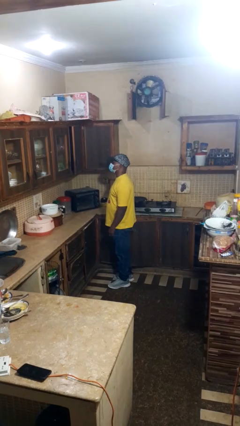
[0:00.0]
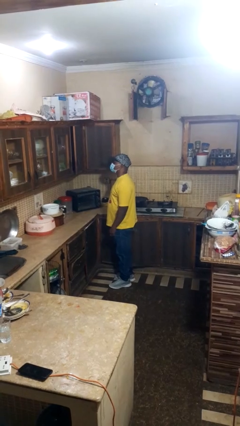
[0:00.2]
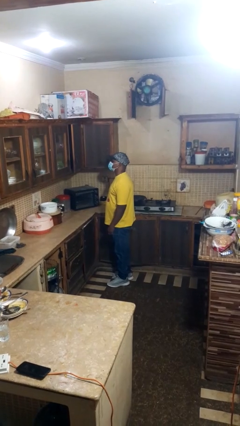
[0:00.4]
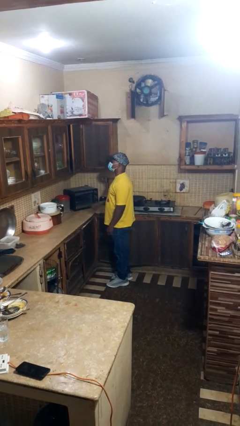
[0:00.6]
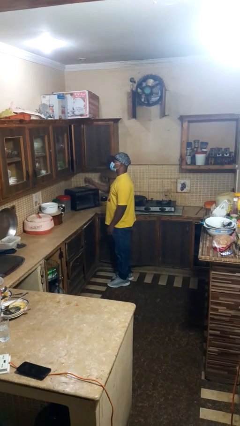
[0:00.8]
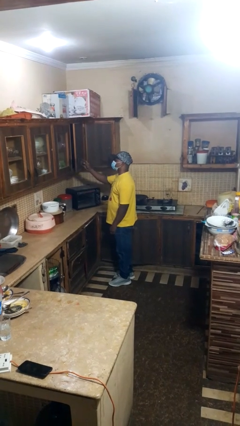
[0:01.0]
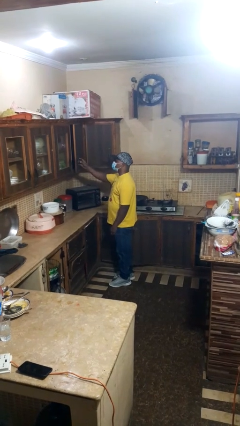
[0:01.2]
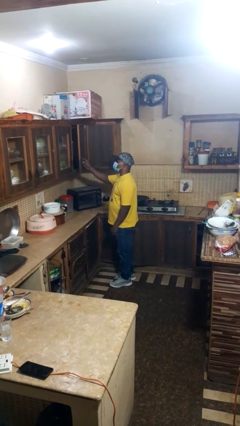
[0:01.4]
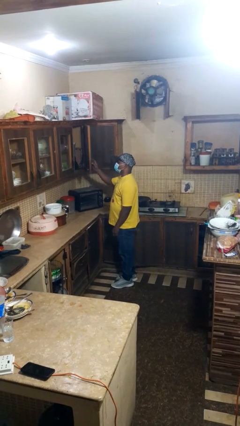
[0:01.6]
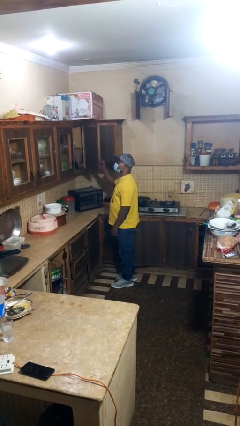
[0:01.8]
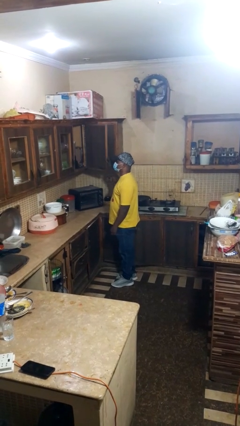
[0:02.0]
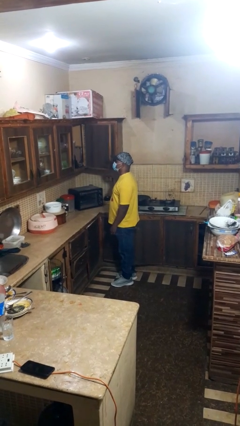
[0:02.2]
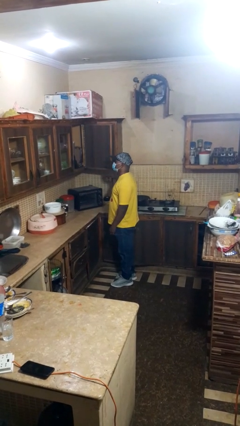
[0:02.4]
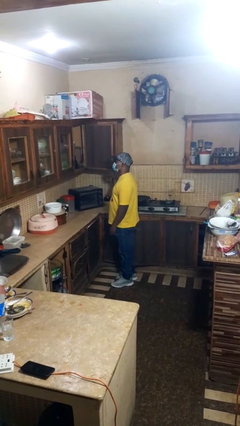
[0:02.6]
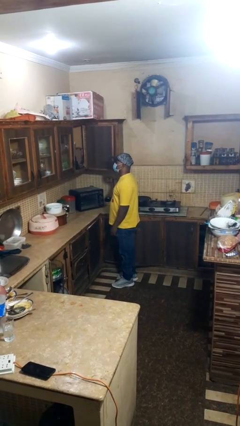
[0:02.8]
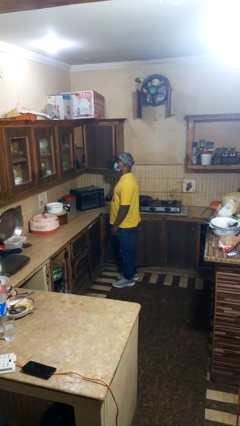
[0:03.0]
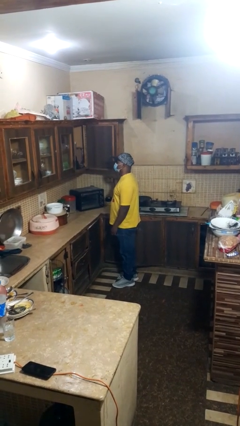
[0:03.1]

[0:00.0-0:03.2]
person opens cabinet

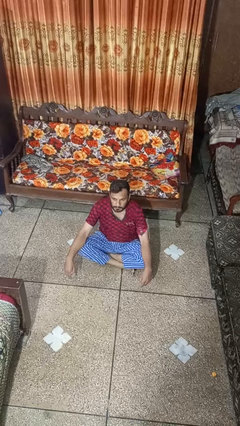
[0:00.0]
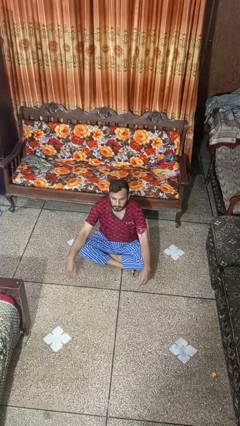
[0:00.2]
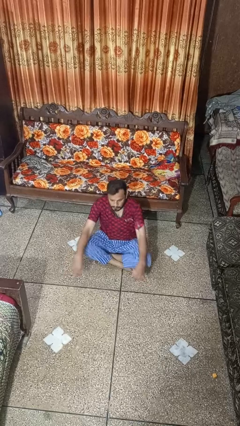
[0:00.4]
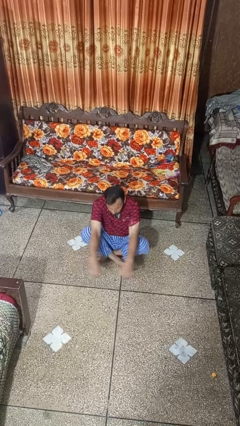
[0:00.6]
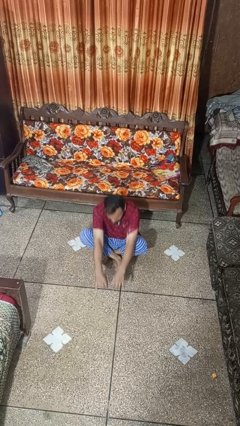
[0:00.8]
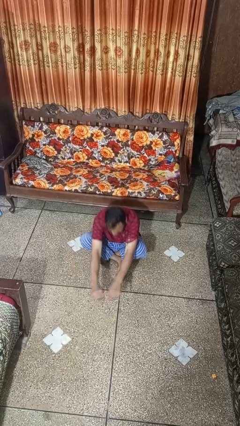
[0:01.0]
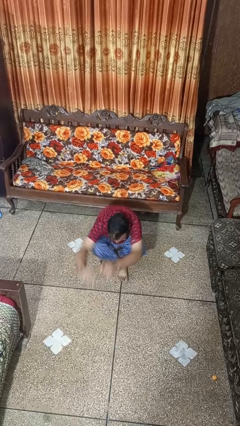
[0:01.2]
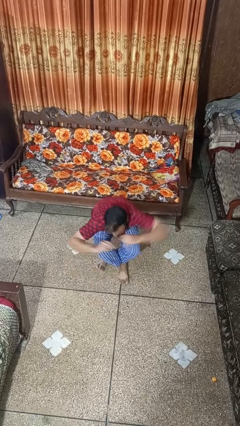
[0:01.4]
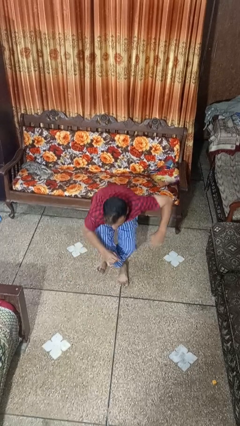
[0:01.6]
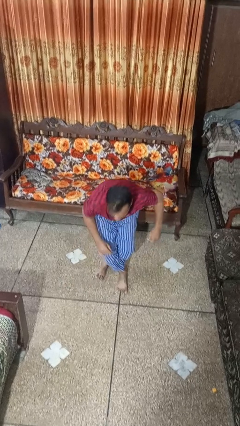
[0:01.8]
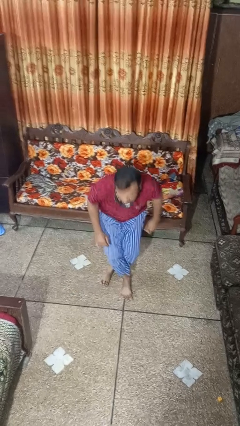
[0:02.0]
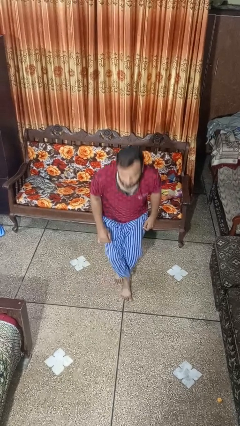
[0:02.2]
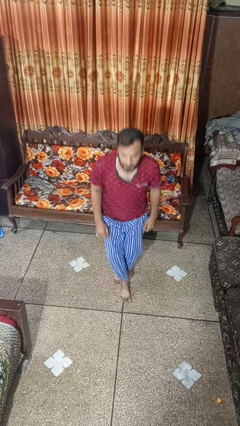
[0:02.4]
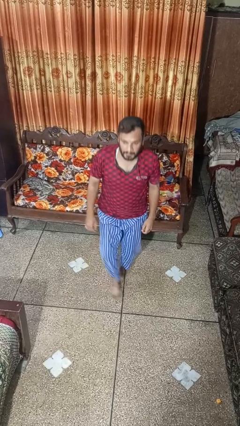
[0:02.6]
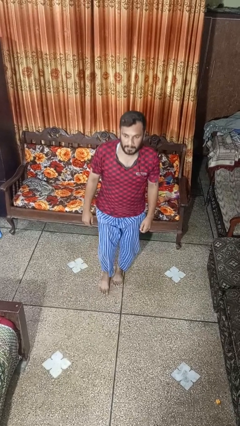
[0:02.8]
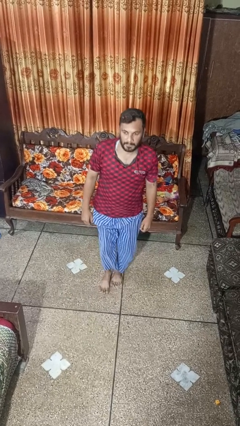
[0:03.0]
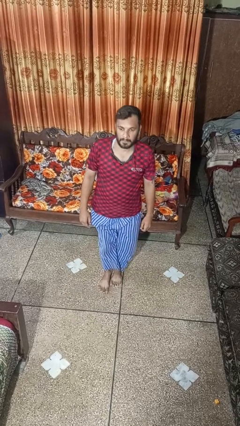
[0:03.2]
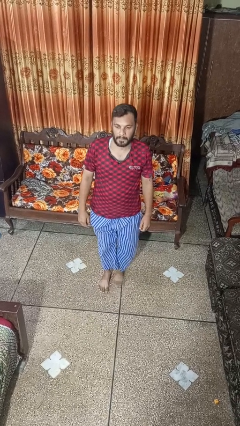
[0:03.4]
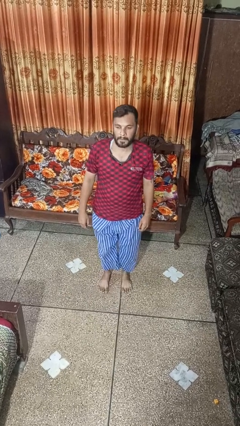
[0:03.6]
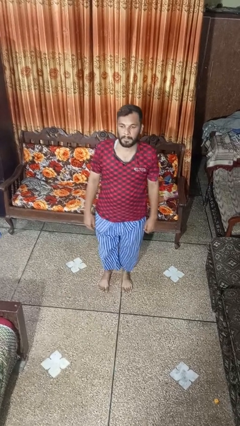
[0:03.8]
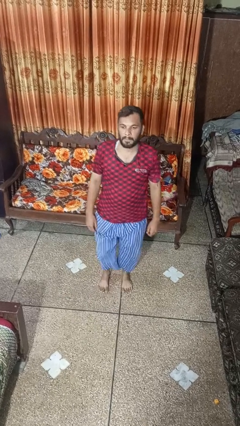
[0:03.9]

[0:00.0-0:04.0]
person stands up from floor

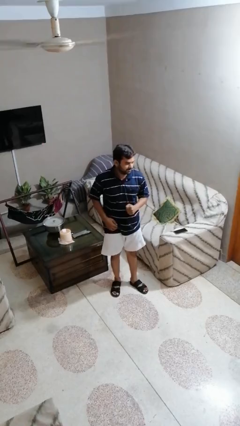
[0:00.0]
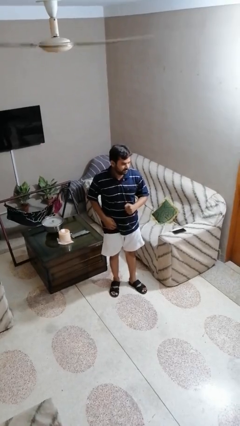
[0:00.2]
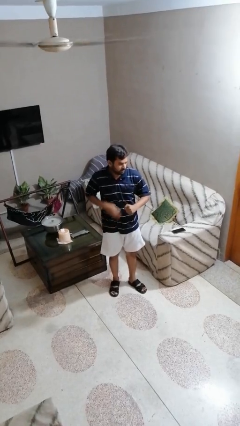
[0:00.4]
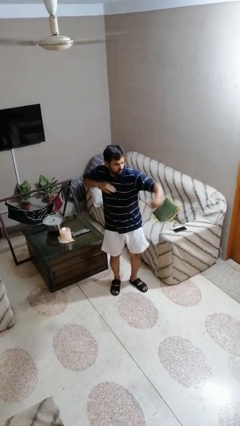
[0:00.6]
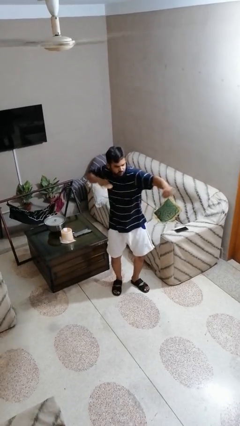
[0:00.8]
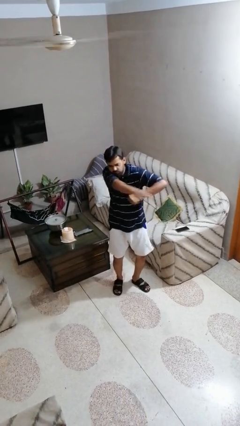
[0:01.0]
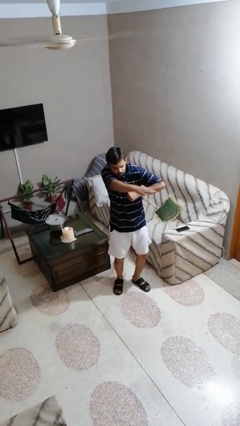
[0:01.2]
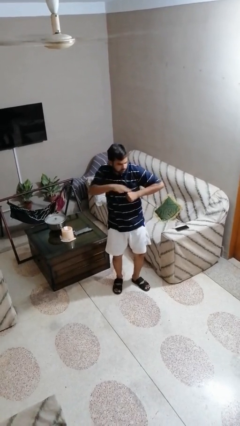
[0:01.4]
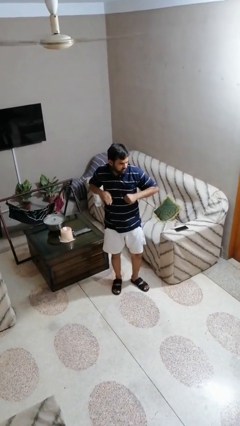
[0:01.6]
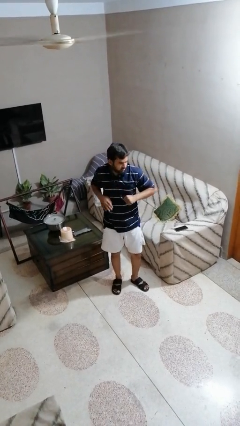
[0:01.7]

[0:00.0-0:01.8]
person karate chop

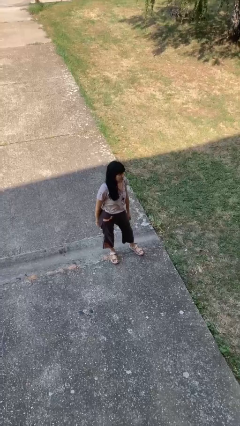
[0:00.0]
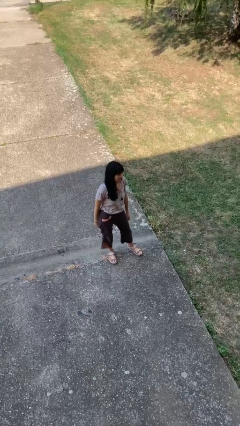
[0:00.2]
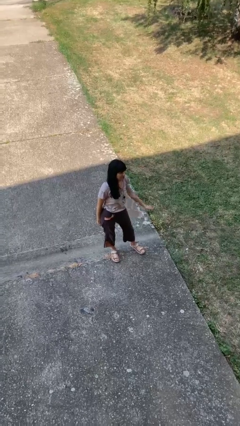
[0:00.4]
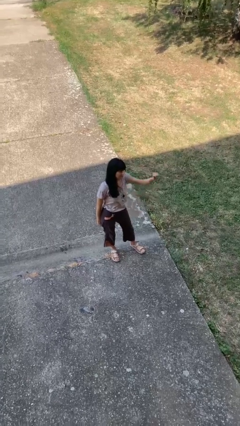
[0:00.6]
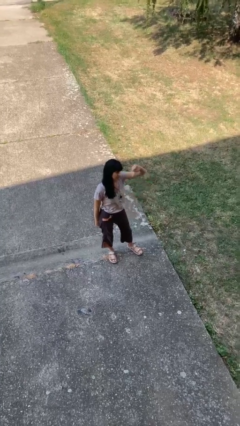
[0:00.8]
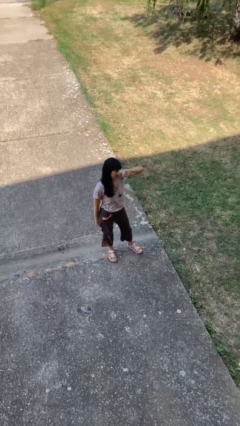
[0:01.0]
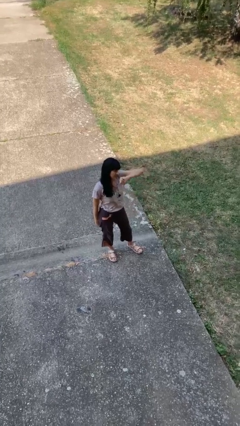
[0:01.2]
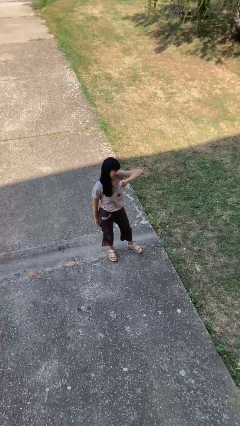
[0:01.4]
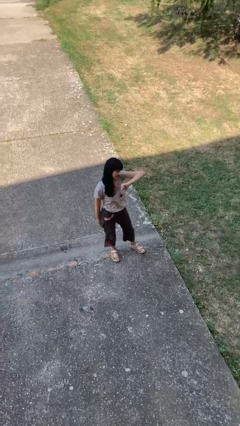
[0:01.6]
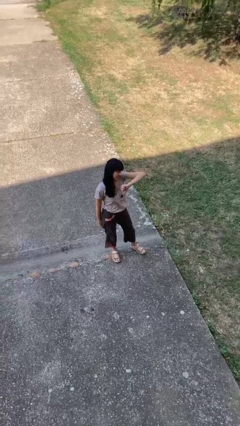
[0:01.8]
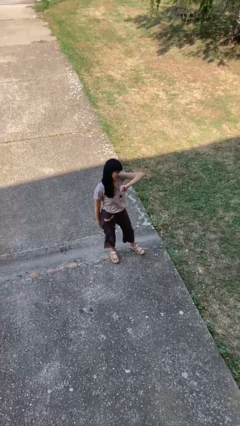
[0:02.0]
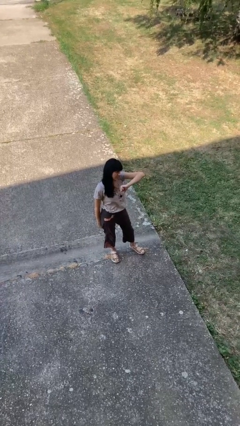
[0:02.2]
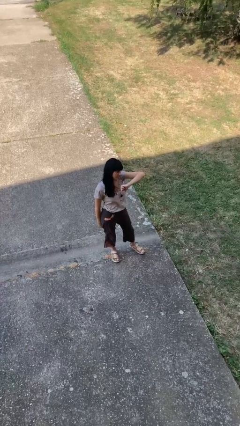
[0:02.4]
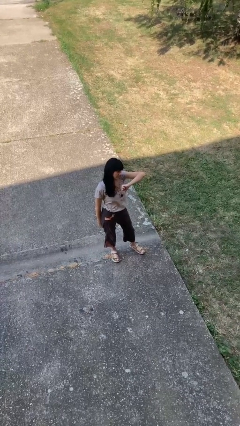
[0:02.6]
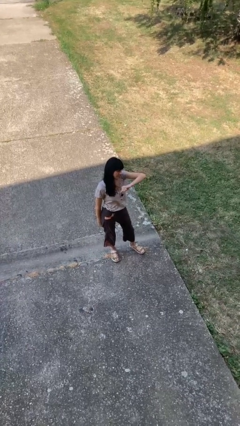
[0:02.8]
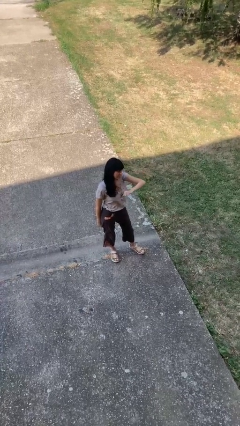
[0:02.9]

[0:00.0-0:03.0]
person gestures thumbs down

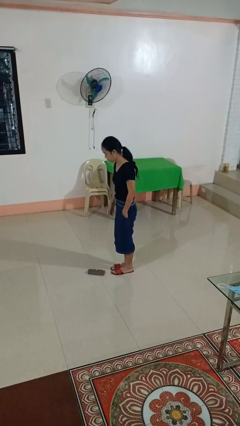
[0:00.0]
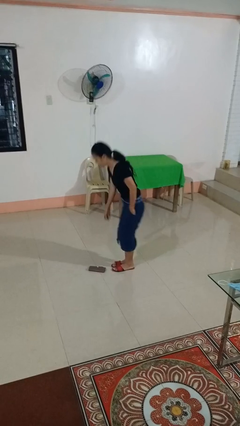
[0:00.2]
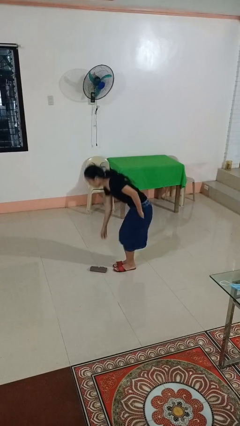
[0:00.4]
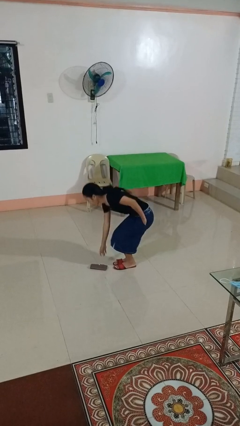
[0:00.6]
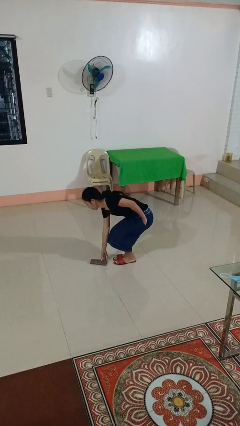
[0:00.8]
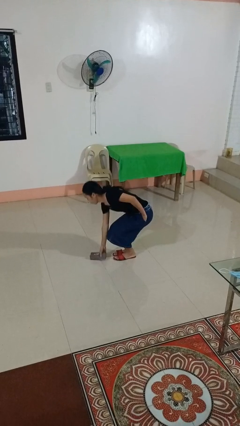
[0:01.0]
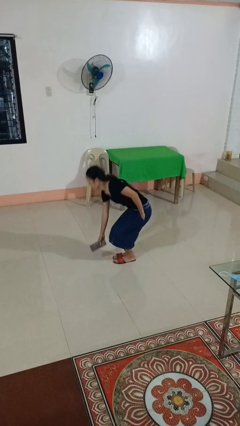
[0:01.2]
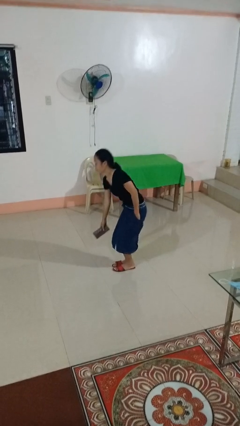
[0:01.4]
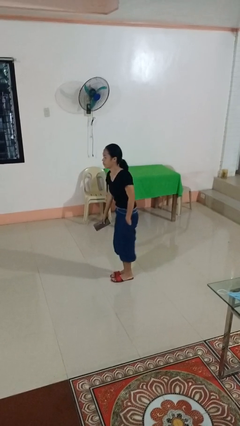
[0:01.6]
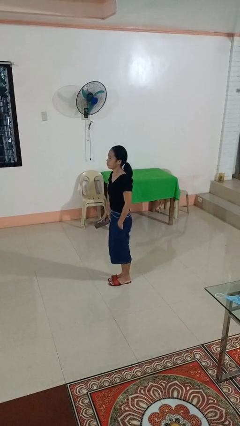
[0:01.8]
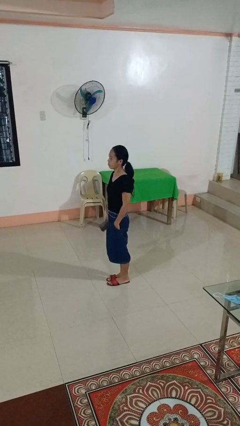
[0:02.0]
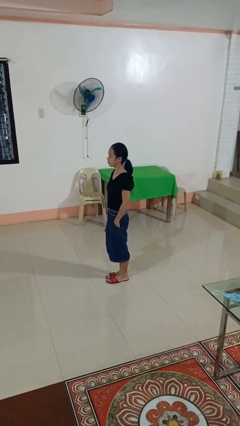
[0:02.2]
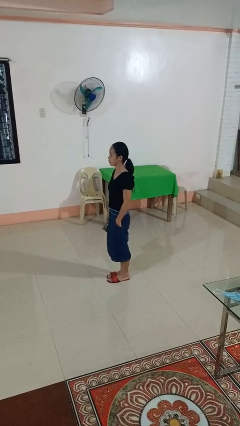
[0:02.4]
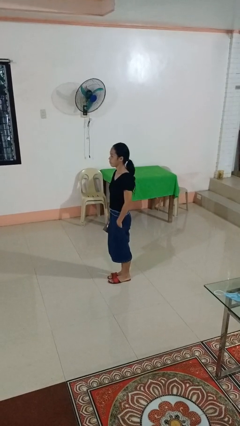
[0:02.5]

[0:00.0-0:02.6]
person picks up object from floor

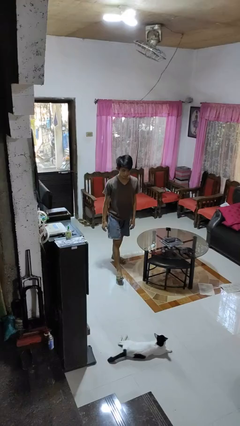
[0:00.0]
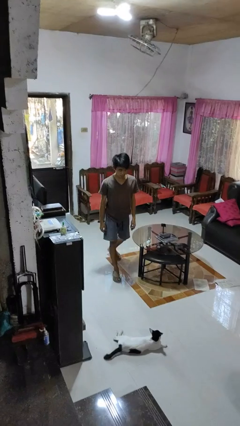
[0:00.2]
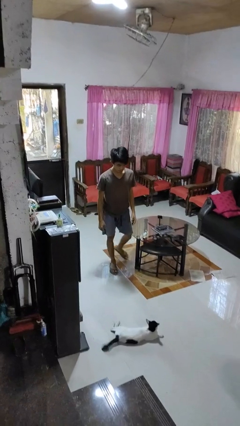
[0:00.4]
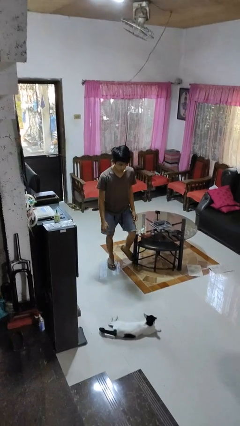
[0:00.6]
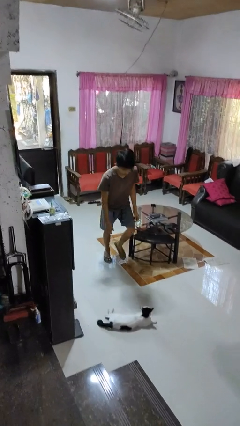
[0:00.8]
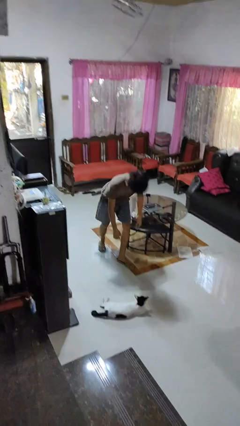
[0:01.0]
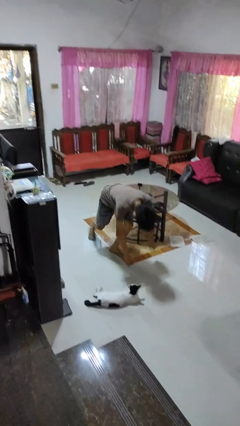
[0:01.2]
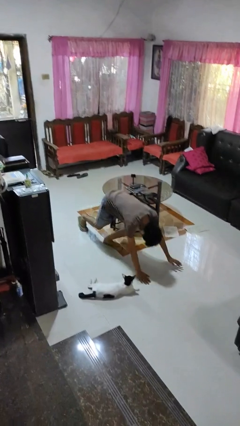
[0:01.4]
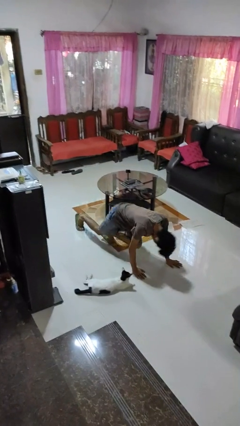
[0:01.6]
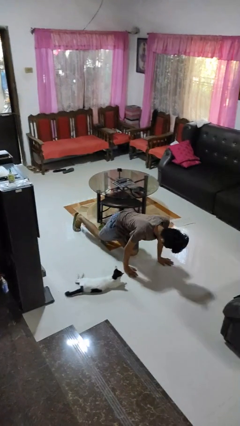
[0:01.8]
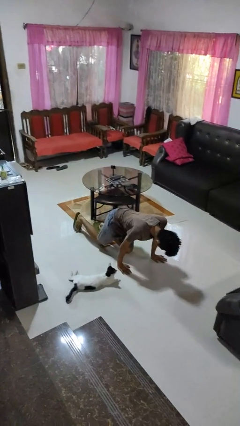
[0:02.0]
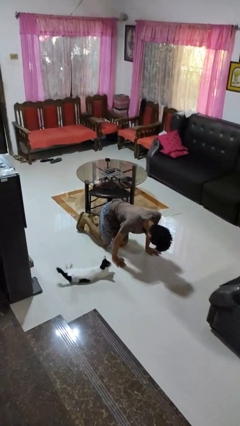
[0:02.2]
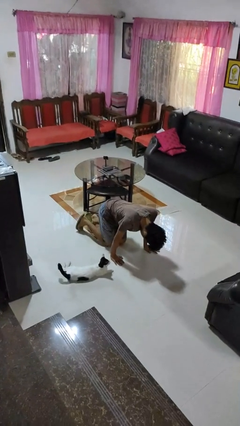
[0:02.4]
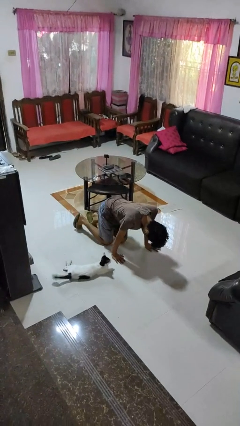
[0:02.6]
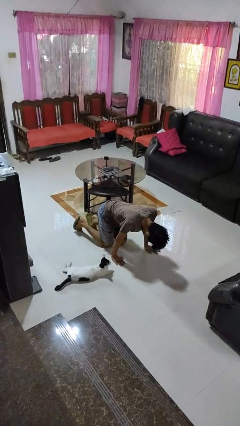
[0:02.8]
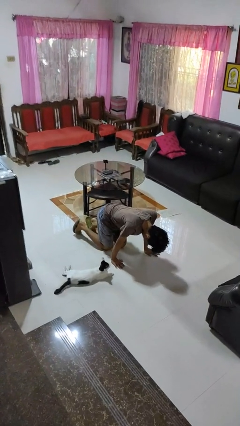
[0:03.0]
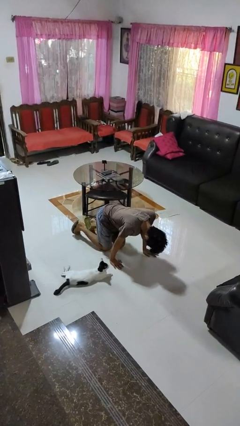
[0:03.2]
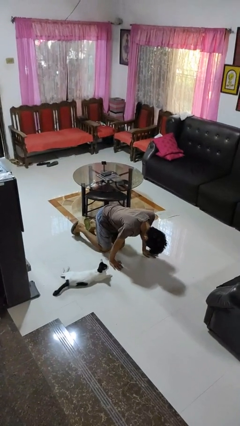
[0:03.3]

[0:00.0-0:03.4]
person trips on object on floor
